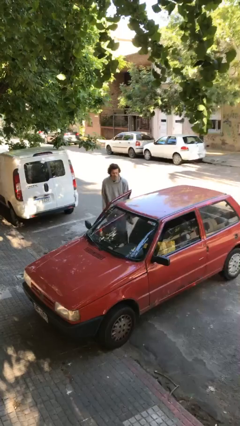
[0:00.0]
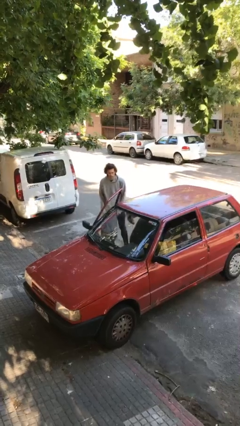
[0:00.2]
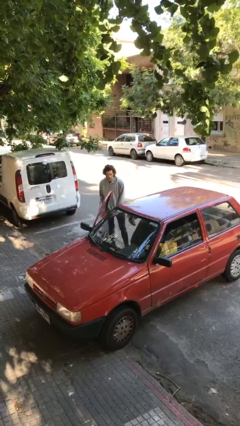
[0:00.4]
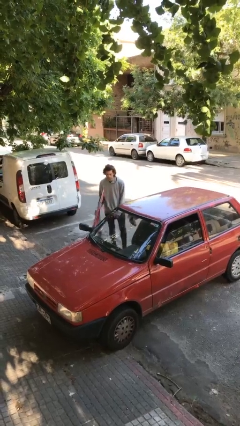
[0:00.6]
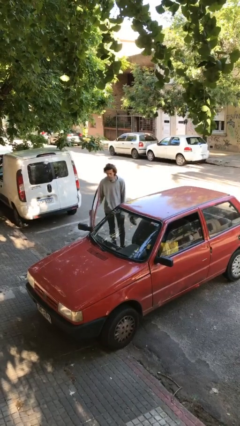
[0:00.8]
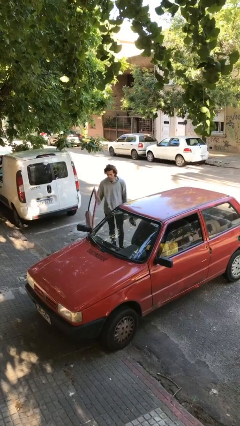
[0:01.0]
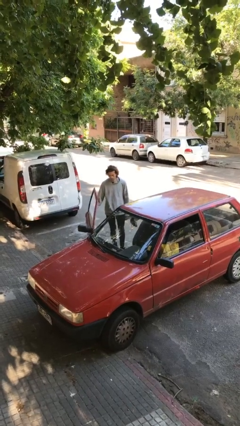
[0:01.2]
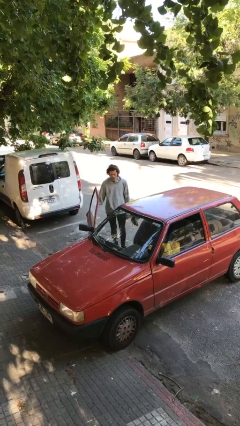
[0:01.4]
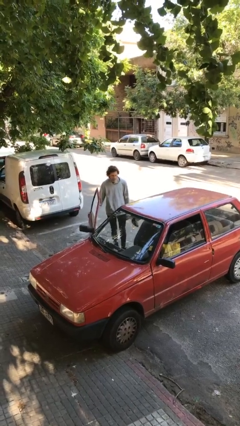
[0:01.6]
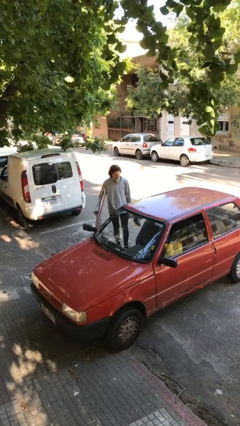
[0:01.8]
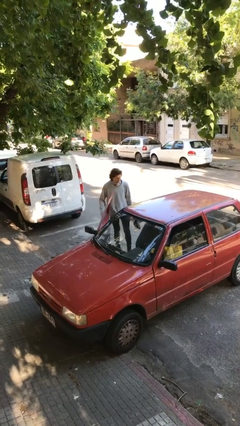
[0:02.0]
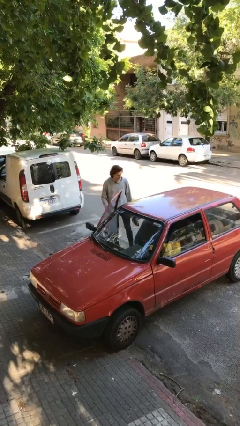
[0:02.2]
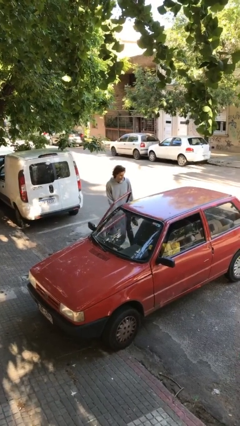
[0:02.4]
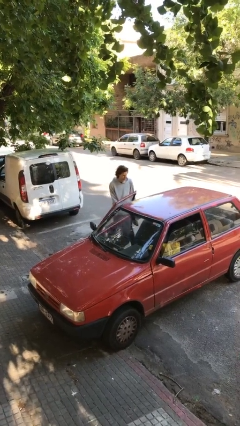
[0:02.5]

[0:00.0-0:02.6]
person opens car door

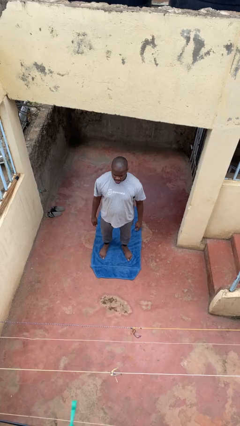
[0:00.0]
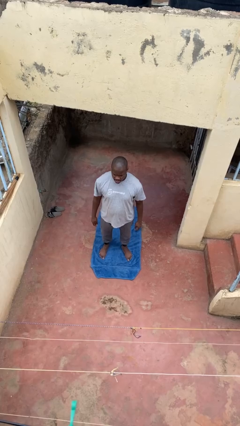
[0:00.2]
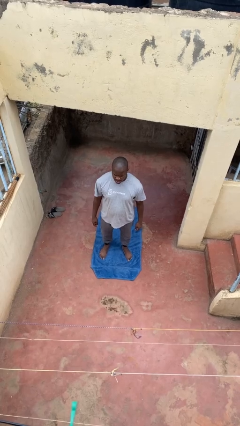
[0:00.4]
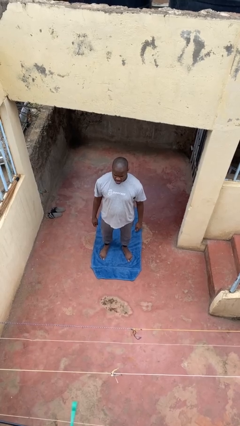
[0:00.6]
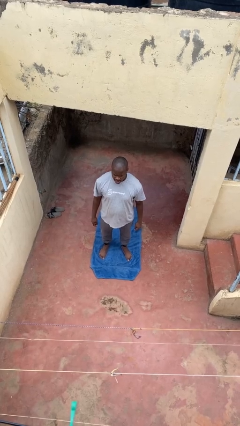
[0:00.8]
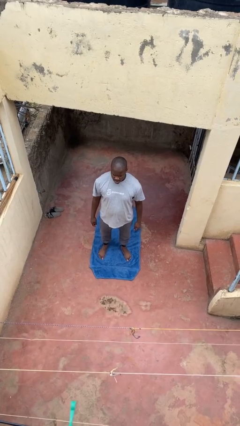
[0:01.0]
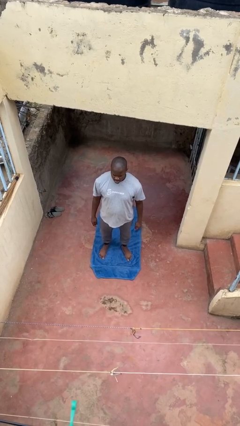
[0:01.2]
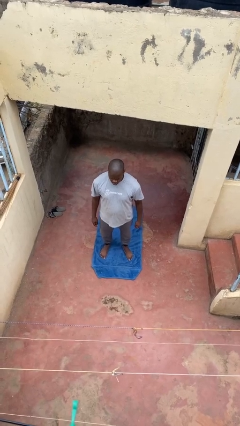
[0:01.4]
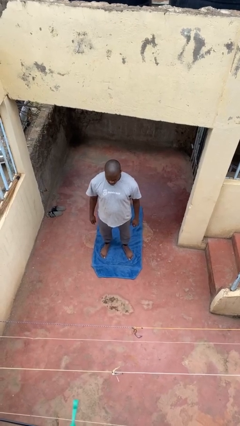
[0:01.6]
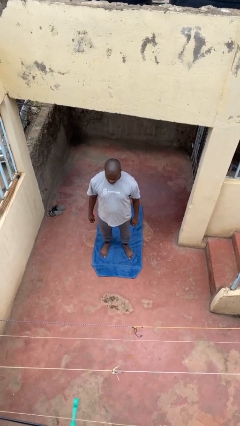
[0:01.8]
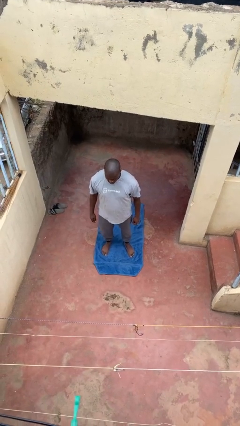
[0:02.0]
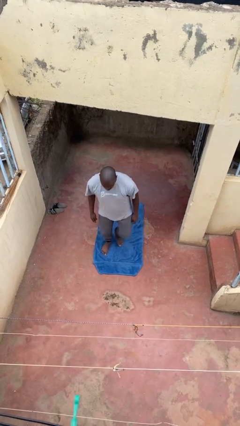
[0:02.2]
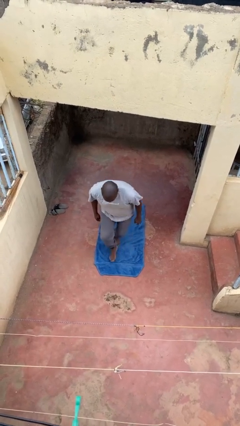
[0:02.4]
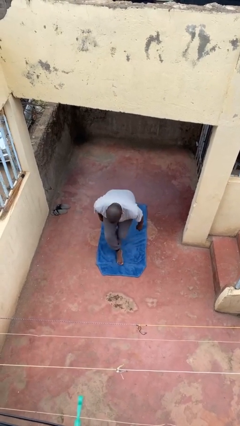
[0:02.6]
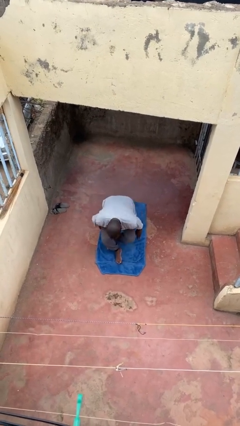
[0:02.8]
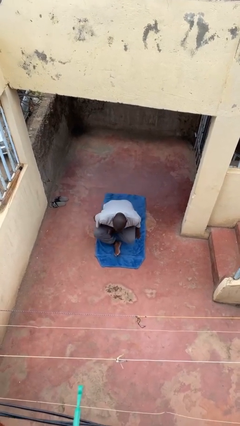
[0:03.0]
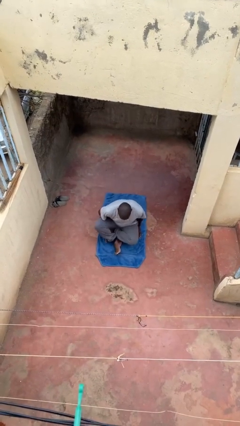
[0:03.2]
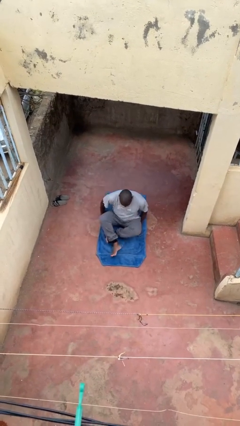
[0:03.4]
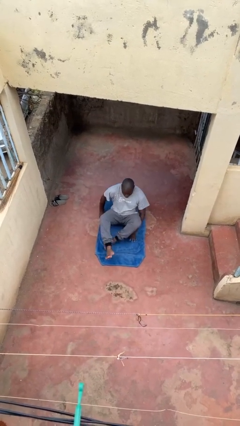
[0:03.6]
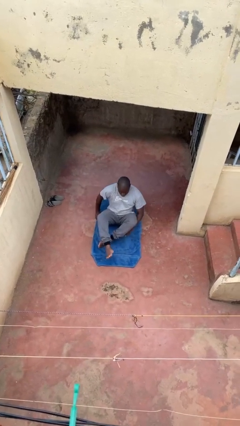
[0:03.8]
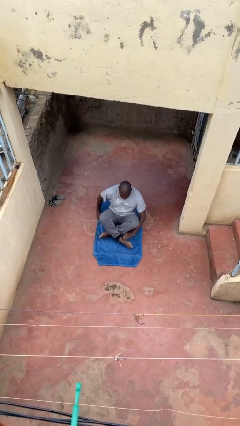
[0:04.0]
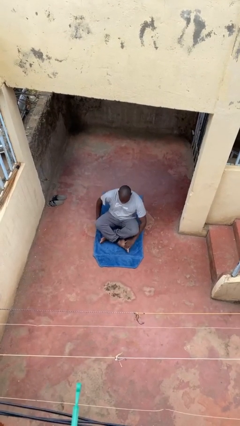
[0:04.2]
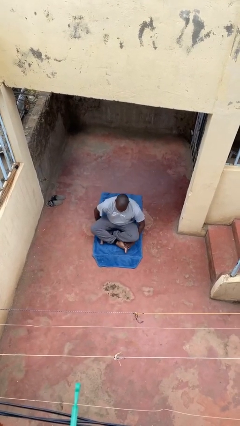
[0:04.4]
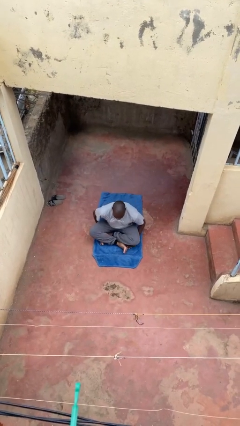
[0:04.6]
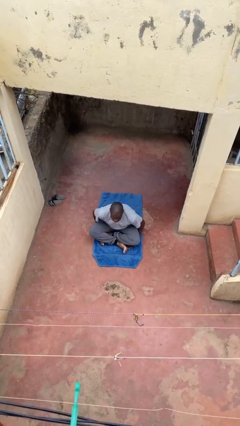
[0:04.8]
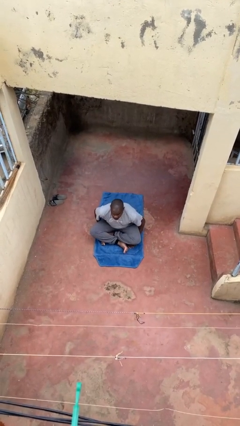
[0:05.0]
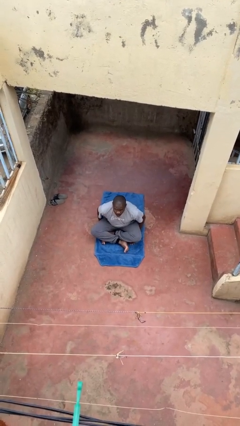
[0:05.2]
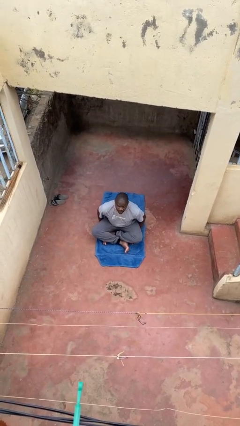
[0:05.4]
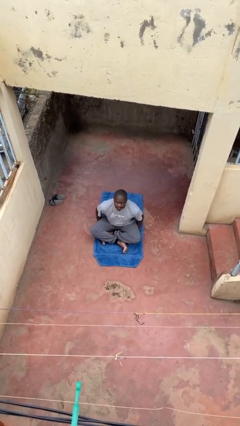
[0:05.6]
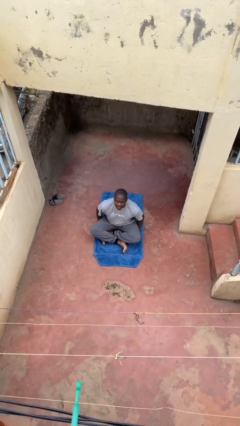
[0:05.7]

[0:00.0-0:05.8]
person sits crisscross

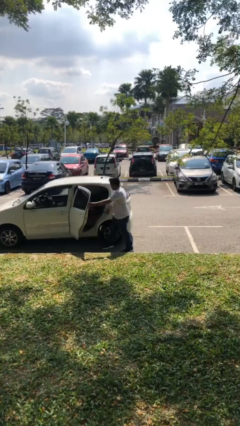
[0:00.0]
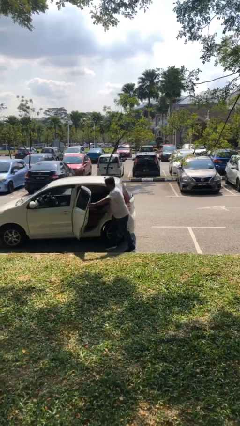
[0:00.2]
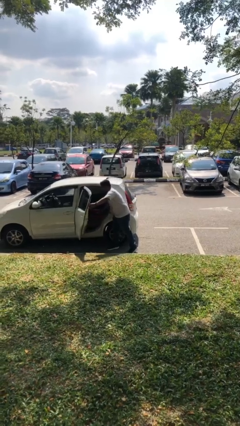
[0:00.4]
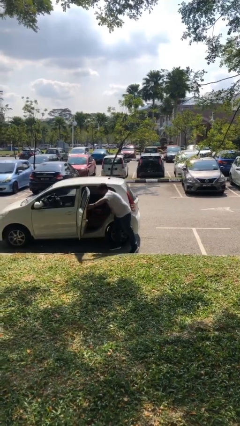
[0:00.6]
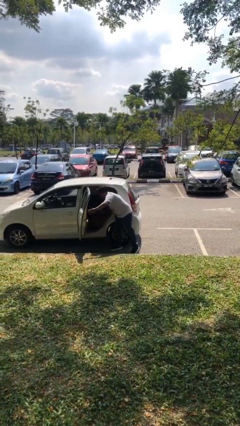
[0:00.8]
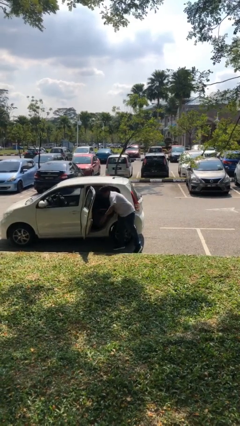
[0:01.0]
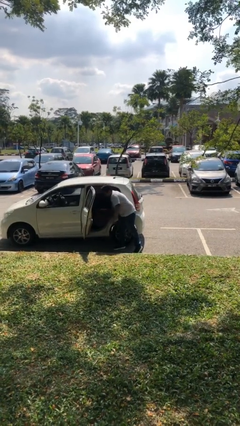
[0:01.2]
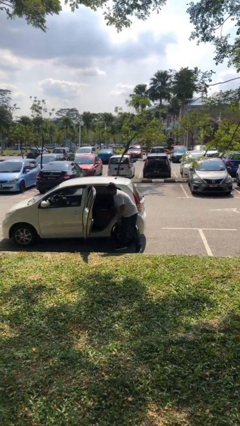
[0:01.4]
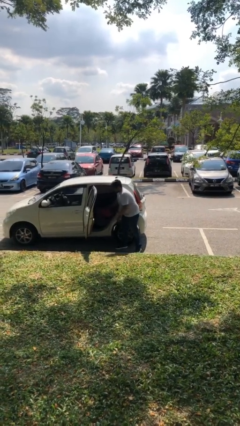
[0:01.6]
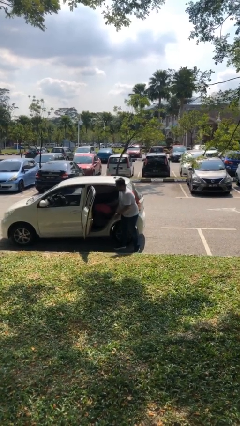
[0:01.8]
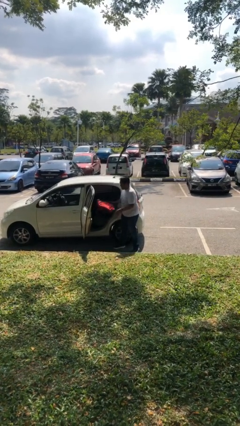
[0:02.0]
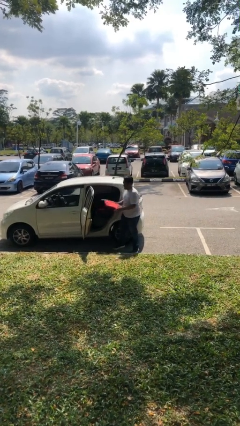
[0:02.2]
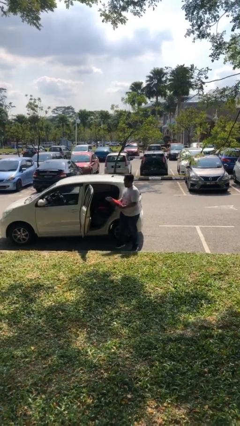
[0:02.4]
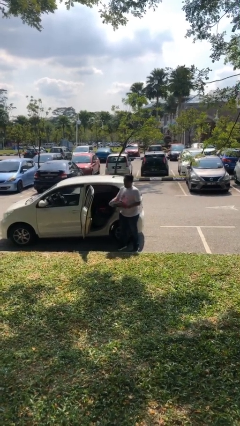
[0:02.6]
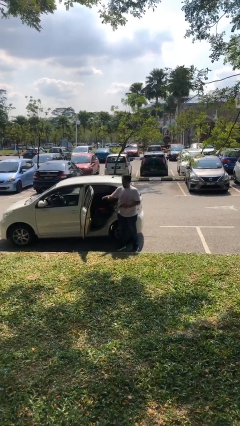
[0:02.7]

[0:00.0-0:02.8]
person unloads car

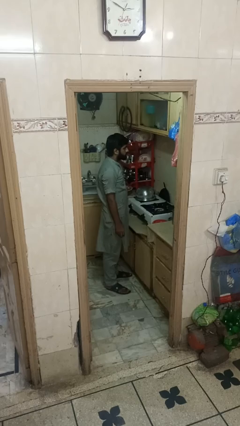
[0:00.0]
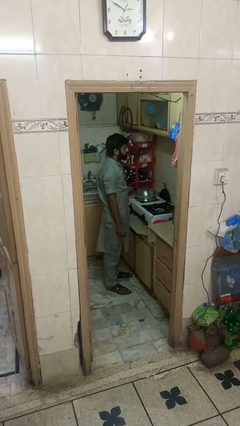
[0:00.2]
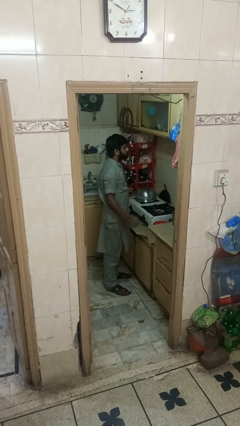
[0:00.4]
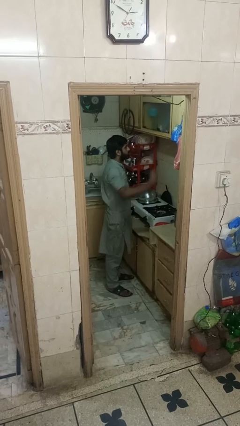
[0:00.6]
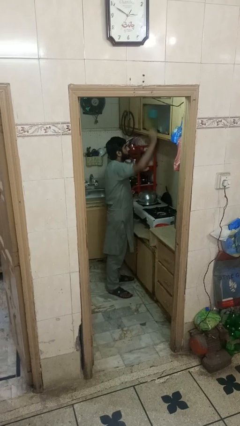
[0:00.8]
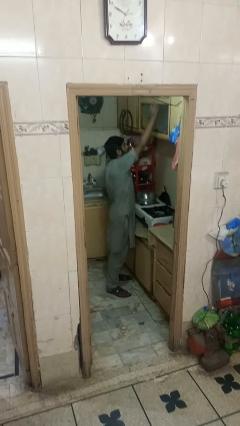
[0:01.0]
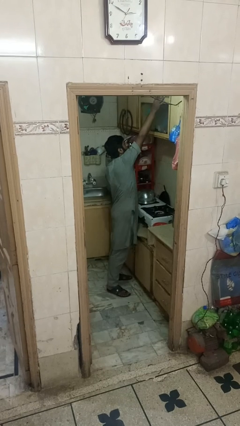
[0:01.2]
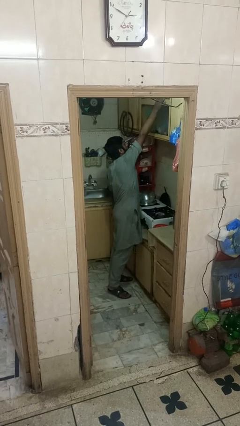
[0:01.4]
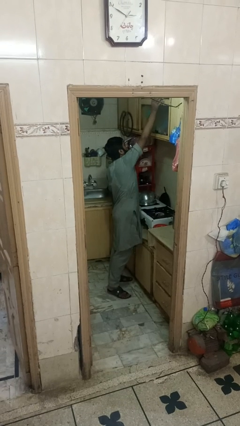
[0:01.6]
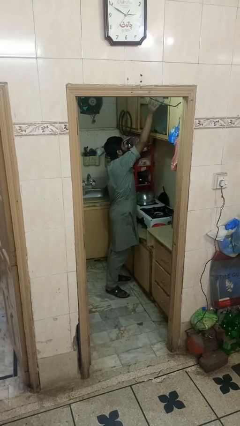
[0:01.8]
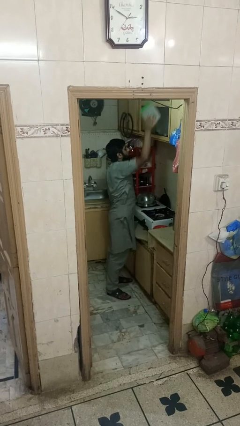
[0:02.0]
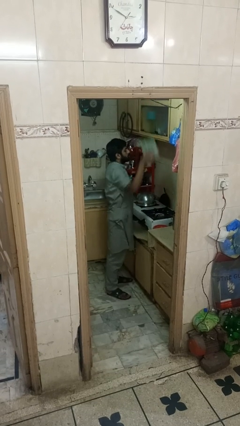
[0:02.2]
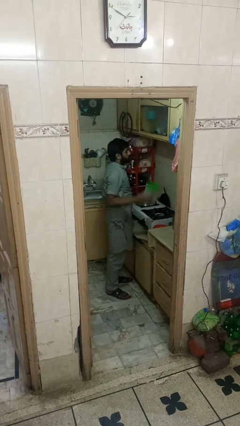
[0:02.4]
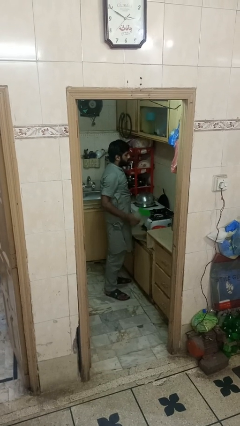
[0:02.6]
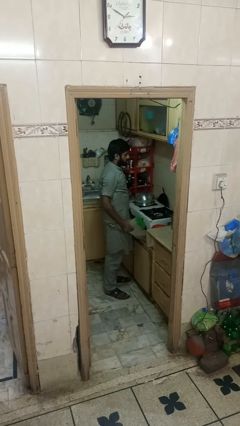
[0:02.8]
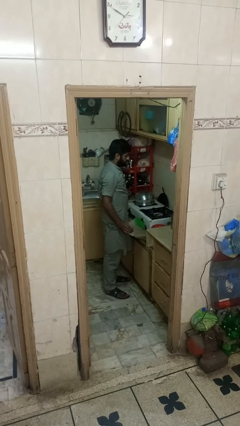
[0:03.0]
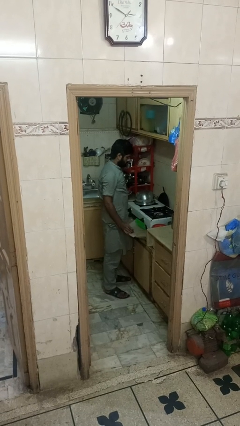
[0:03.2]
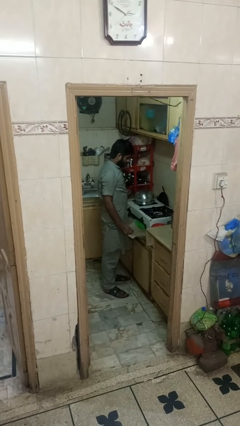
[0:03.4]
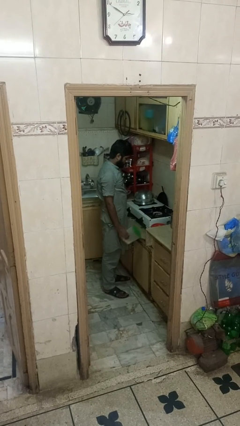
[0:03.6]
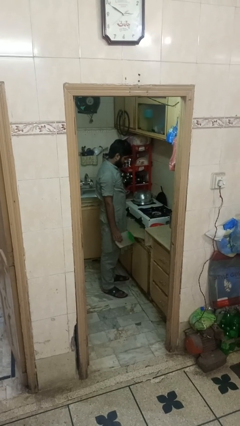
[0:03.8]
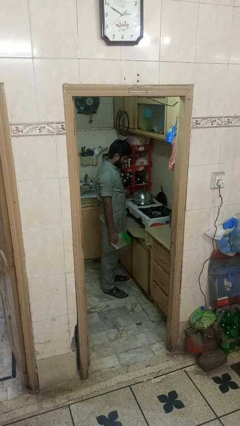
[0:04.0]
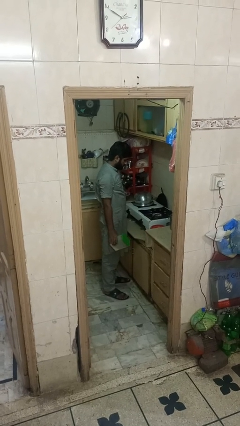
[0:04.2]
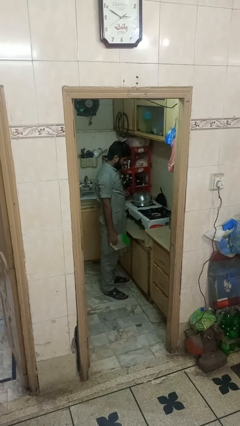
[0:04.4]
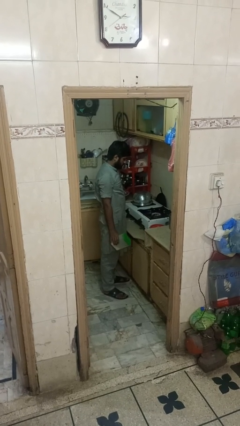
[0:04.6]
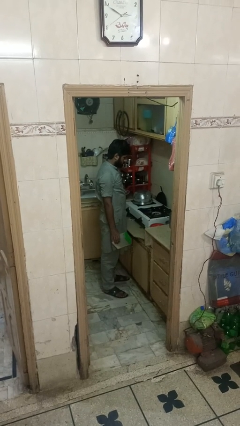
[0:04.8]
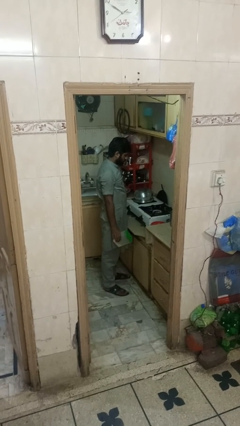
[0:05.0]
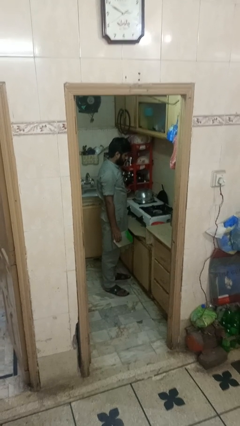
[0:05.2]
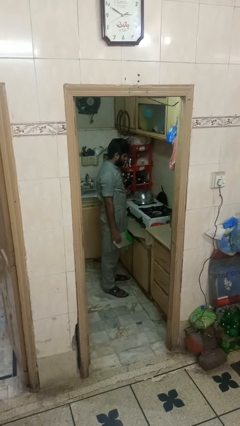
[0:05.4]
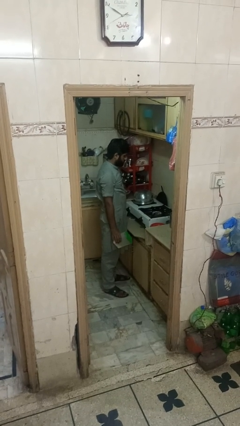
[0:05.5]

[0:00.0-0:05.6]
person picks up object from shelf

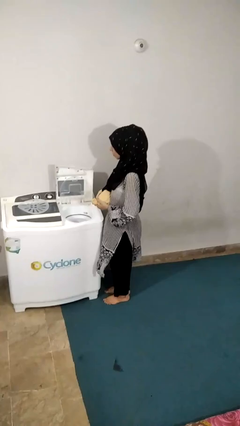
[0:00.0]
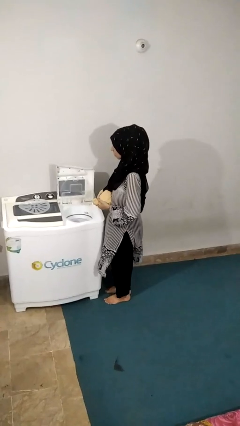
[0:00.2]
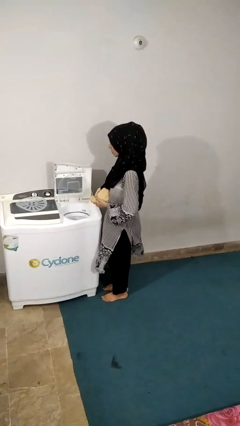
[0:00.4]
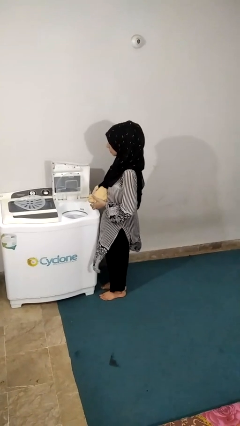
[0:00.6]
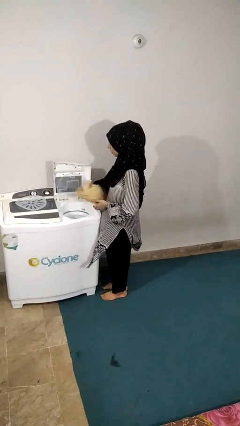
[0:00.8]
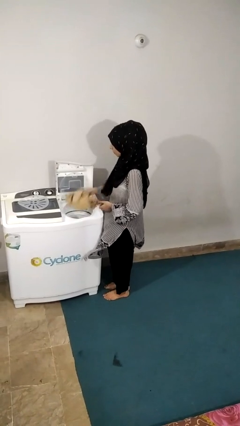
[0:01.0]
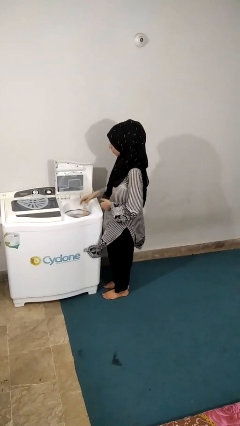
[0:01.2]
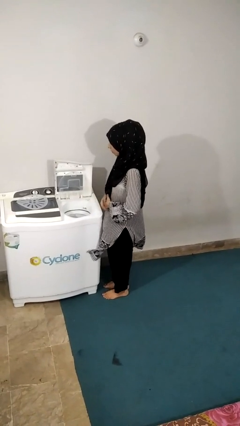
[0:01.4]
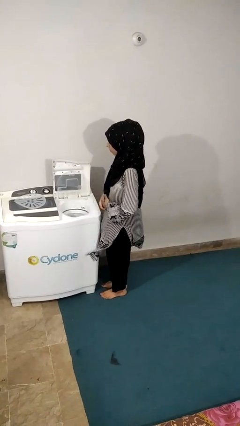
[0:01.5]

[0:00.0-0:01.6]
person loads dryer
